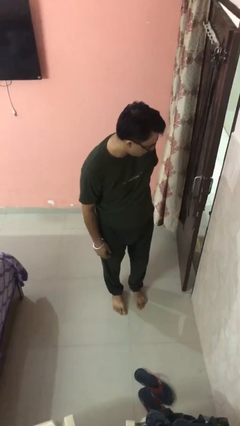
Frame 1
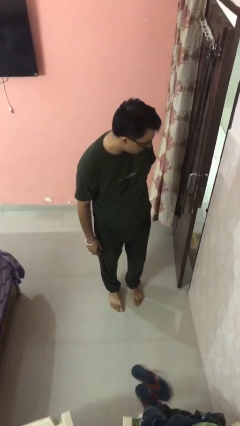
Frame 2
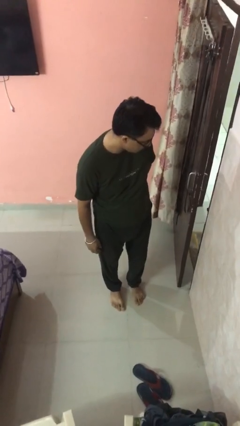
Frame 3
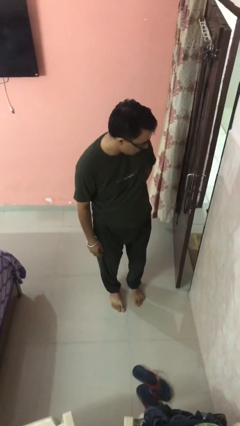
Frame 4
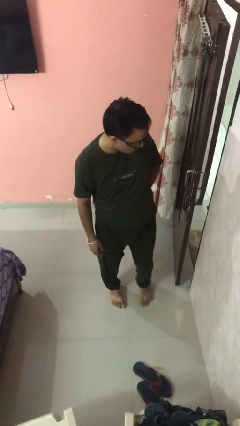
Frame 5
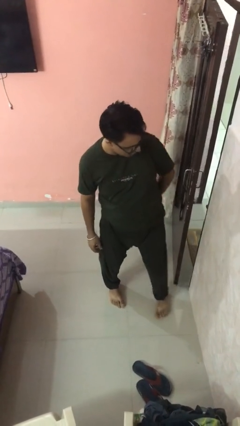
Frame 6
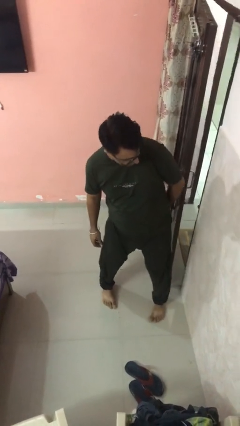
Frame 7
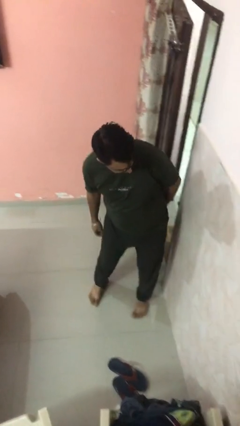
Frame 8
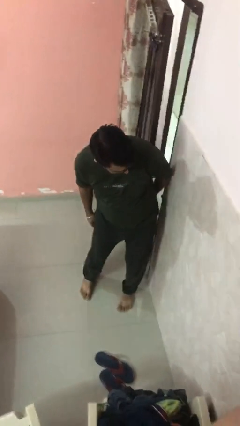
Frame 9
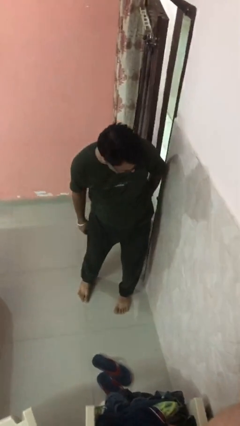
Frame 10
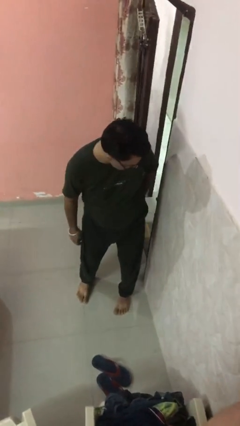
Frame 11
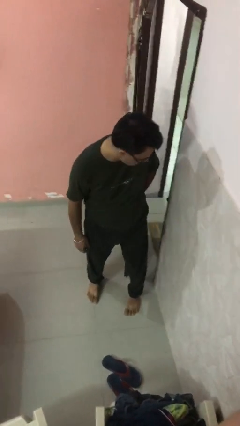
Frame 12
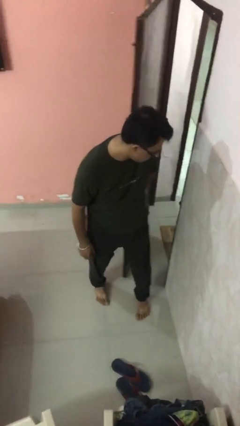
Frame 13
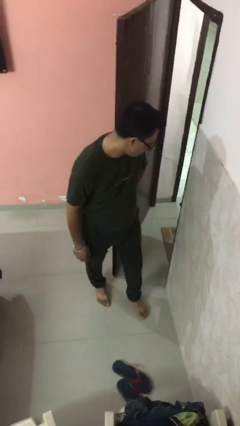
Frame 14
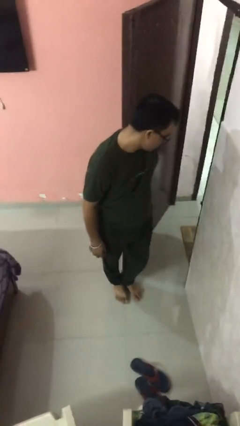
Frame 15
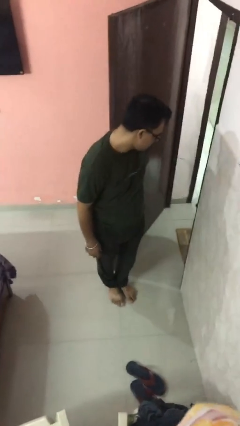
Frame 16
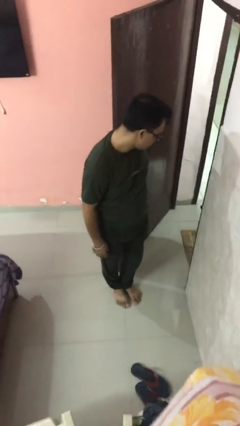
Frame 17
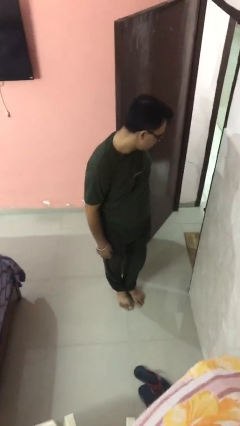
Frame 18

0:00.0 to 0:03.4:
person opens facility door

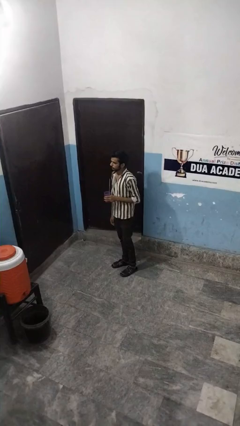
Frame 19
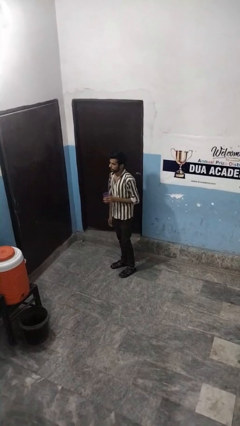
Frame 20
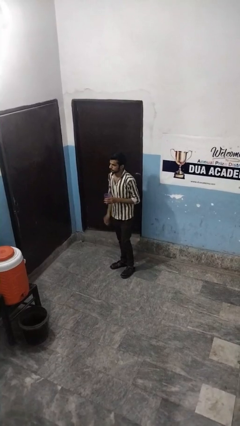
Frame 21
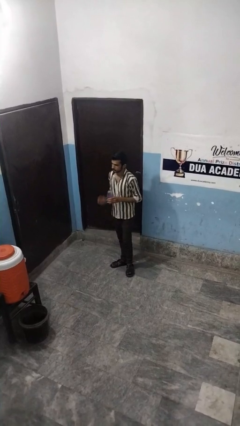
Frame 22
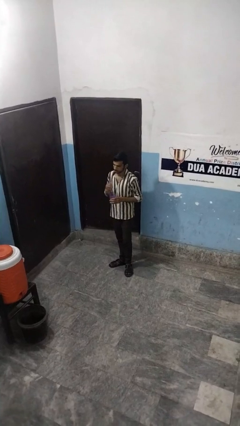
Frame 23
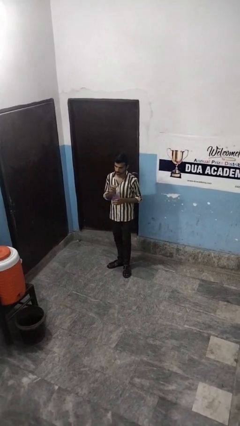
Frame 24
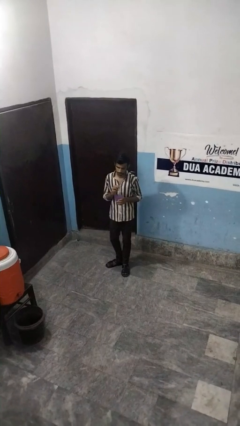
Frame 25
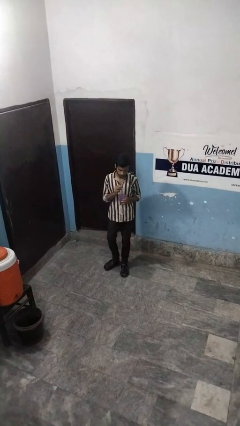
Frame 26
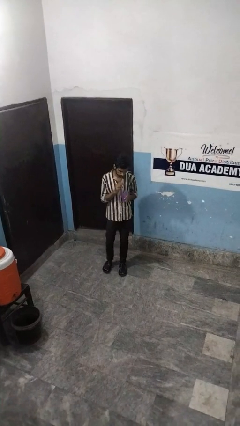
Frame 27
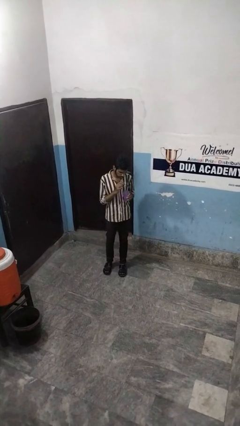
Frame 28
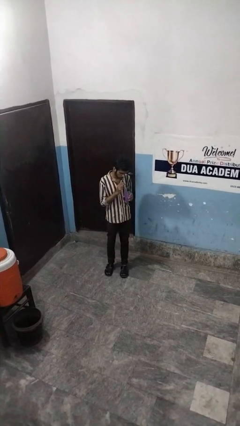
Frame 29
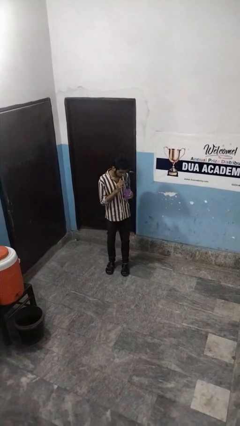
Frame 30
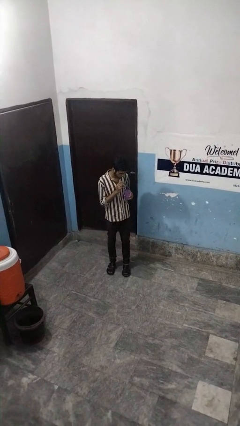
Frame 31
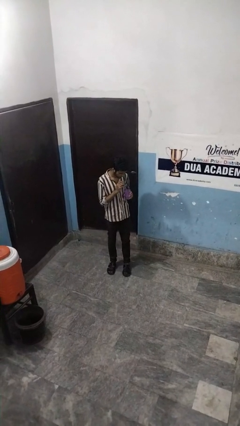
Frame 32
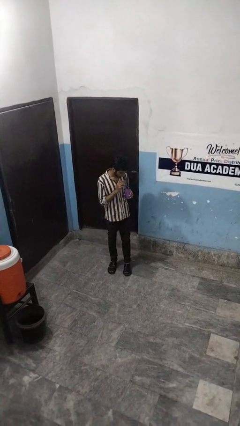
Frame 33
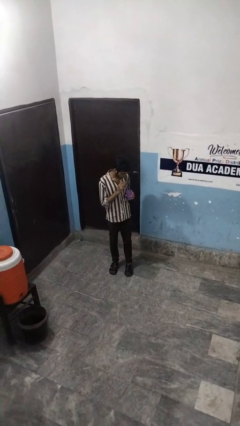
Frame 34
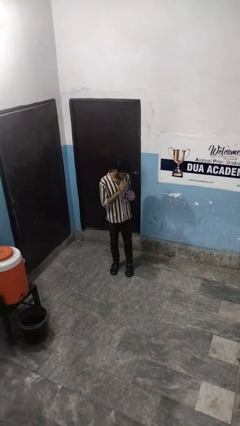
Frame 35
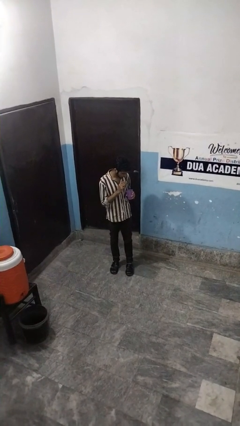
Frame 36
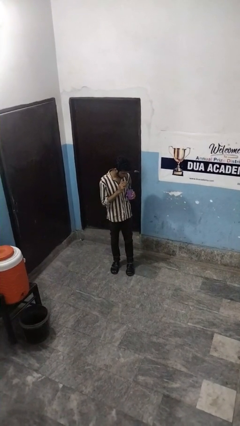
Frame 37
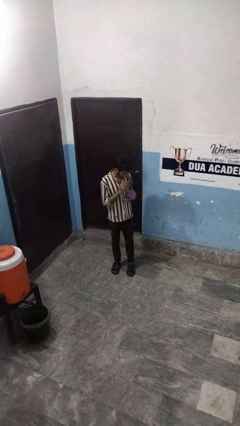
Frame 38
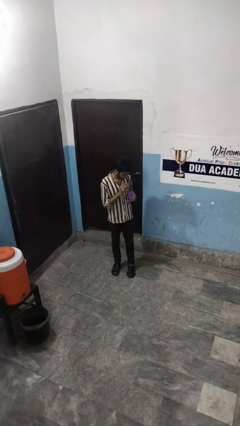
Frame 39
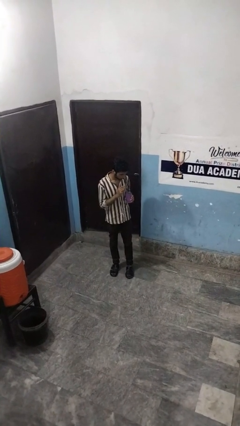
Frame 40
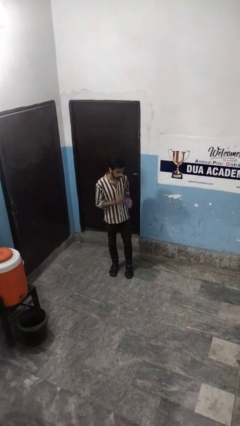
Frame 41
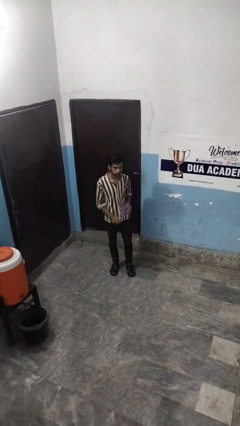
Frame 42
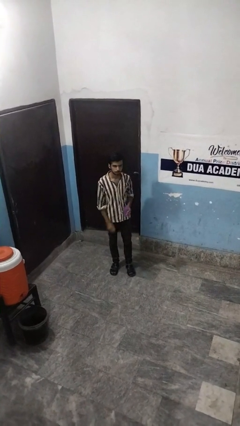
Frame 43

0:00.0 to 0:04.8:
person drinks from straw

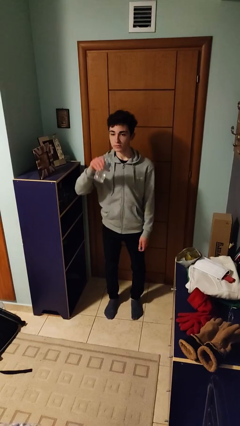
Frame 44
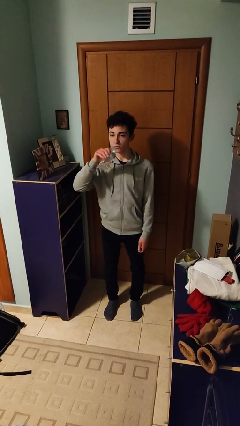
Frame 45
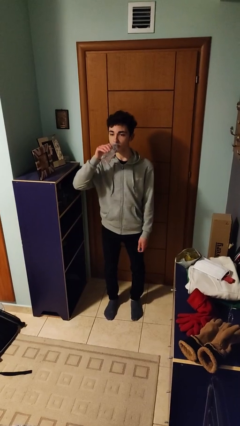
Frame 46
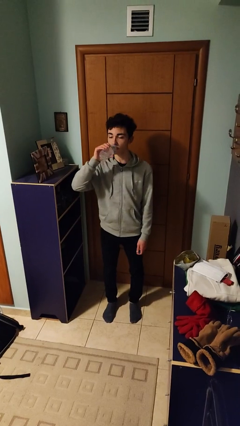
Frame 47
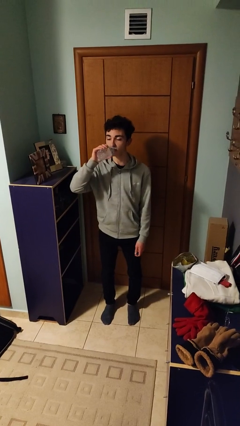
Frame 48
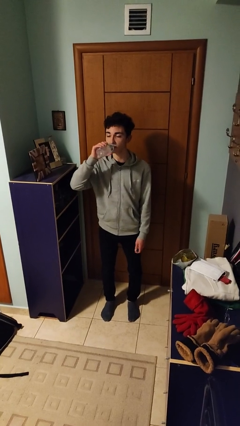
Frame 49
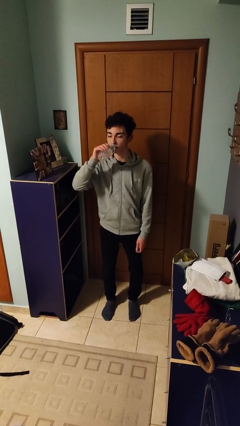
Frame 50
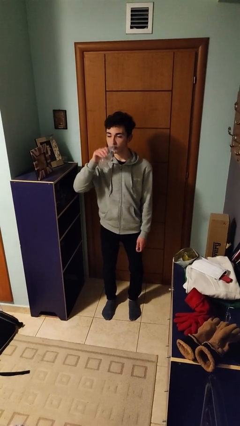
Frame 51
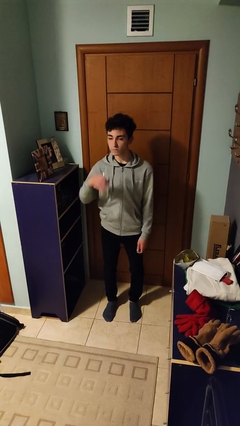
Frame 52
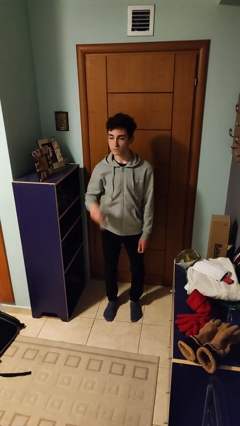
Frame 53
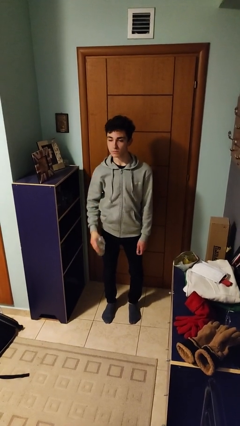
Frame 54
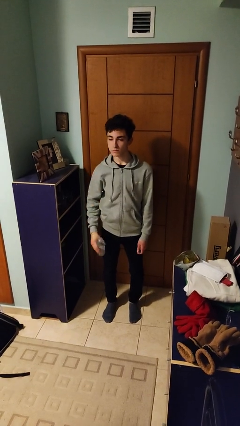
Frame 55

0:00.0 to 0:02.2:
person drinks from bottle

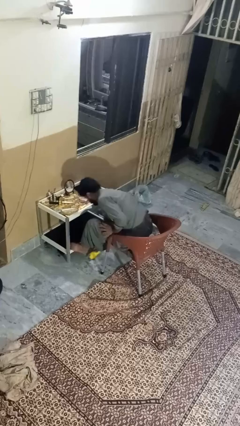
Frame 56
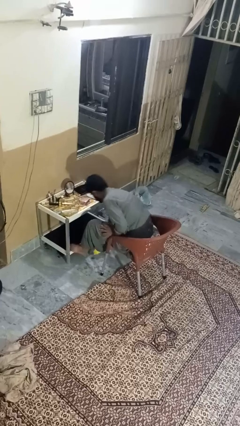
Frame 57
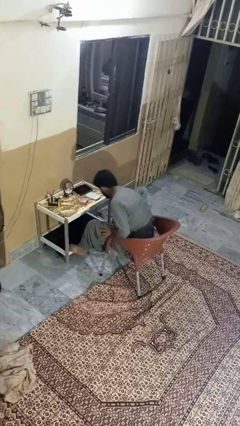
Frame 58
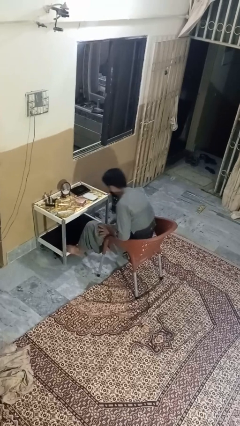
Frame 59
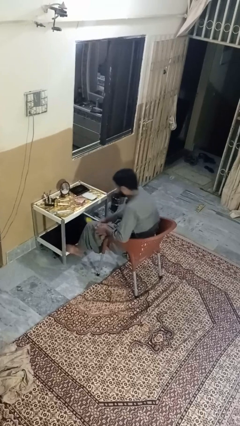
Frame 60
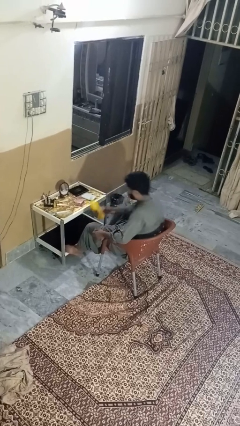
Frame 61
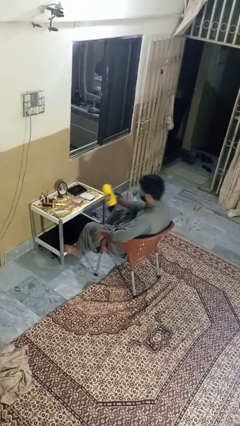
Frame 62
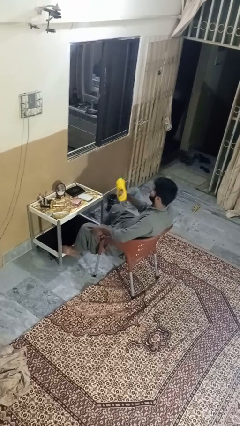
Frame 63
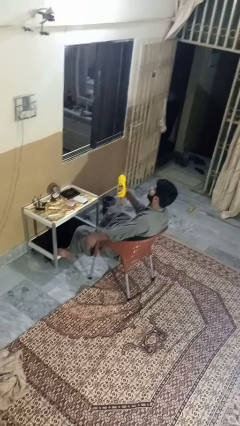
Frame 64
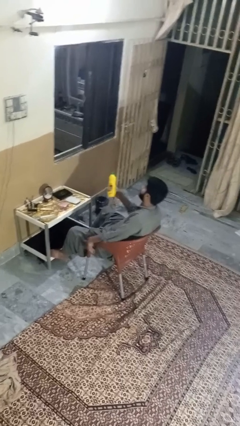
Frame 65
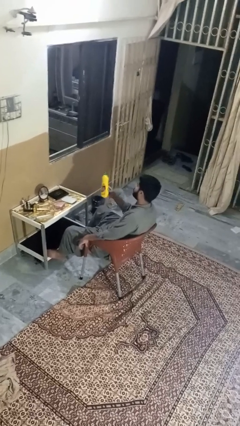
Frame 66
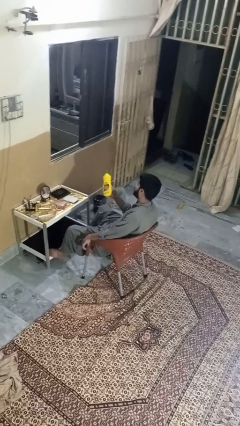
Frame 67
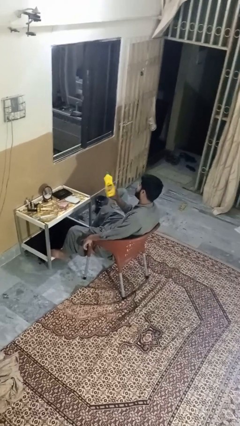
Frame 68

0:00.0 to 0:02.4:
person picks up object from floor

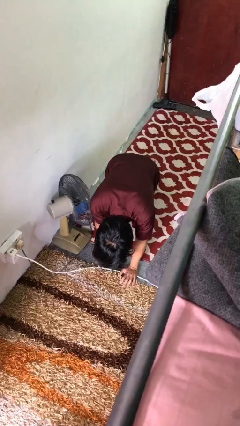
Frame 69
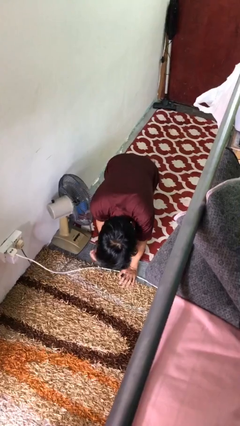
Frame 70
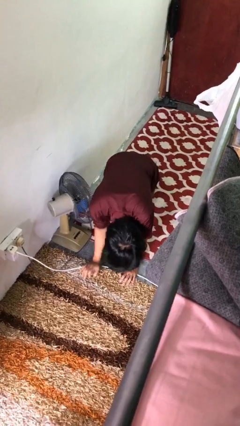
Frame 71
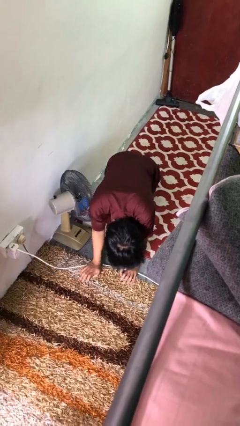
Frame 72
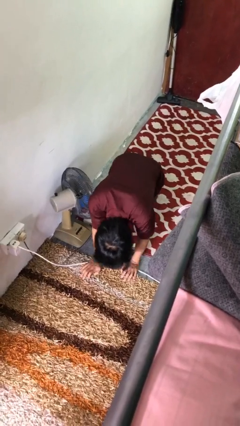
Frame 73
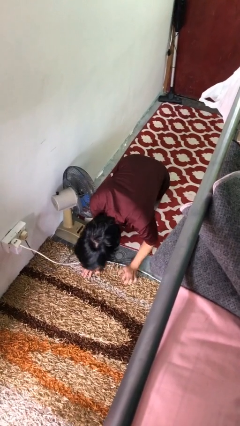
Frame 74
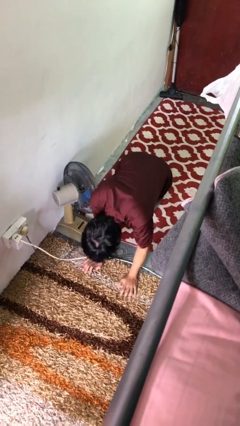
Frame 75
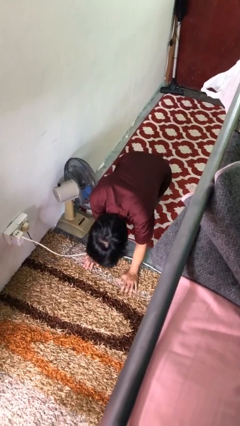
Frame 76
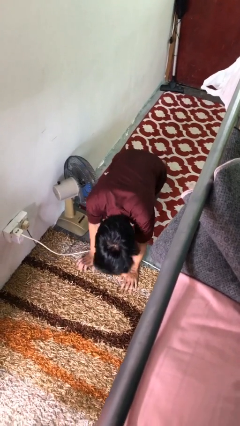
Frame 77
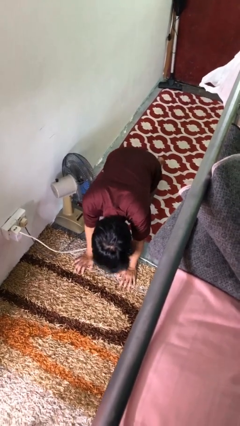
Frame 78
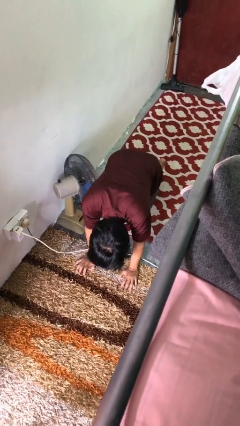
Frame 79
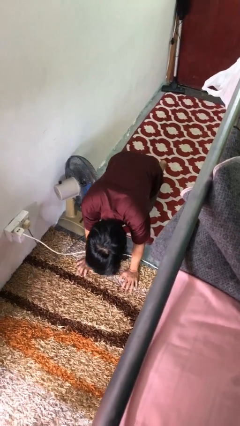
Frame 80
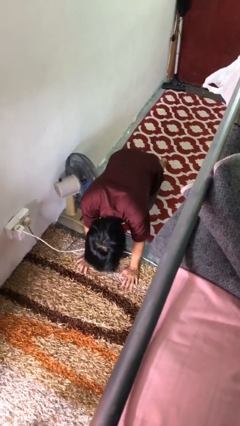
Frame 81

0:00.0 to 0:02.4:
person crawls

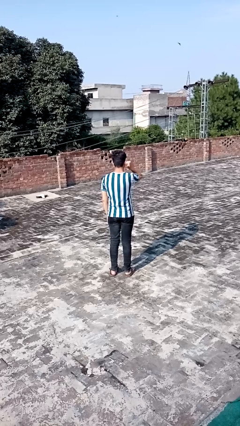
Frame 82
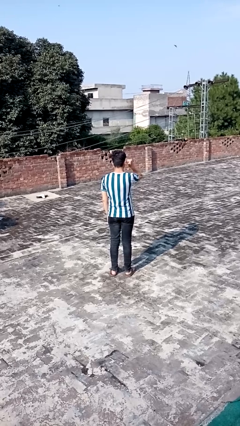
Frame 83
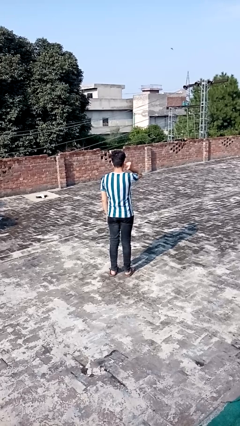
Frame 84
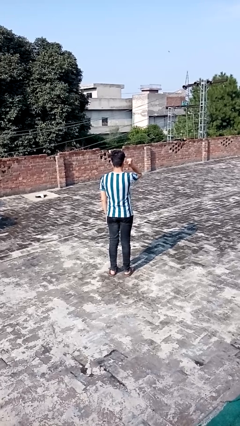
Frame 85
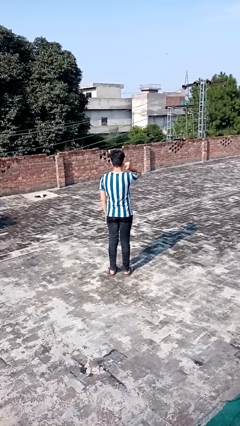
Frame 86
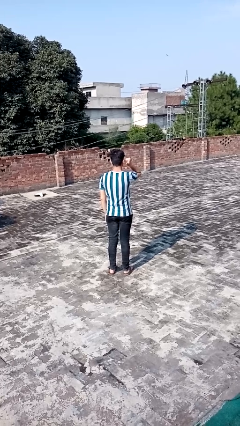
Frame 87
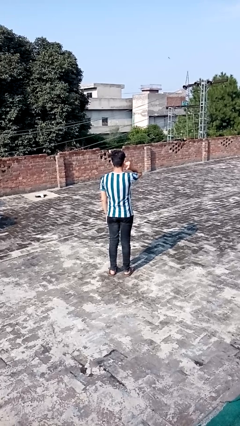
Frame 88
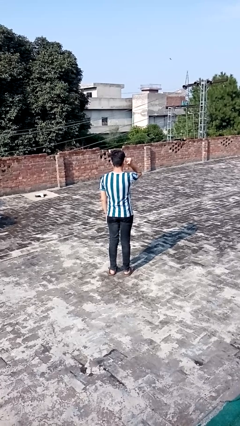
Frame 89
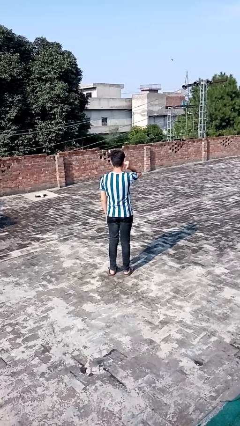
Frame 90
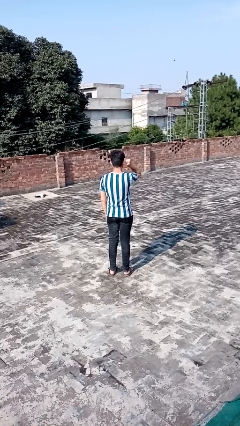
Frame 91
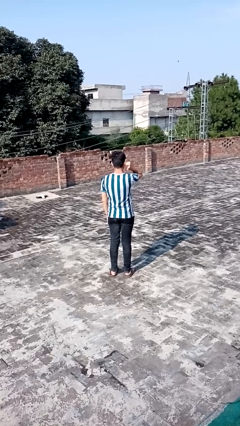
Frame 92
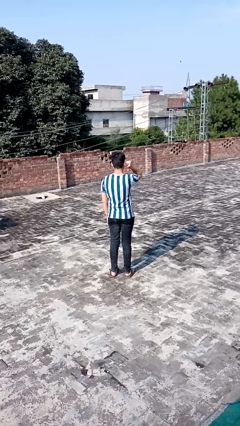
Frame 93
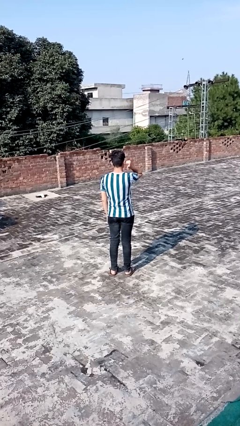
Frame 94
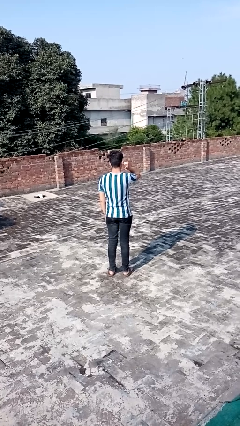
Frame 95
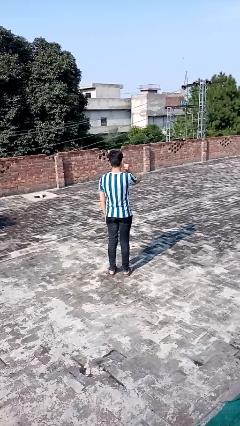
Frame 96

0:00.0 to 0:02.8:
person gestures behind me
